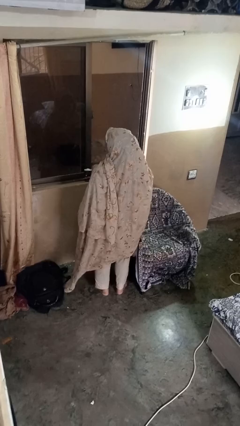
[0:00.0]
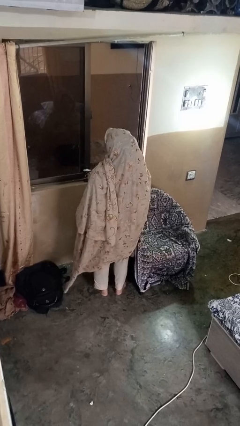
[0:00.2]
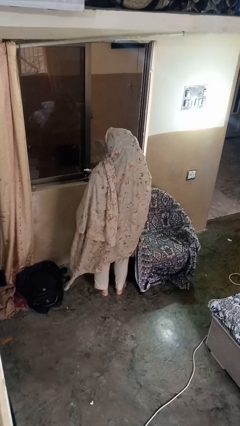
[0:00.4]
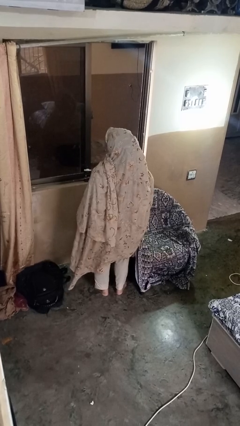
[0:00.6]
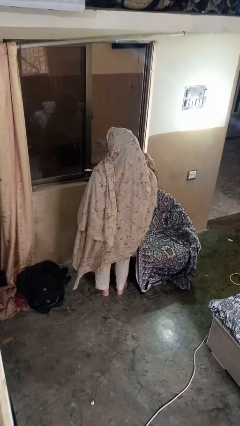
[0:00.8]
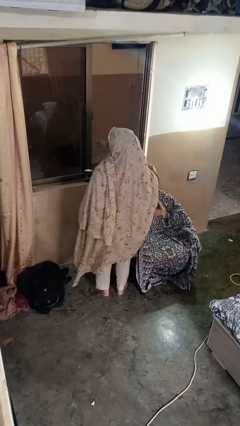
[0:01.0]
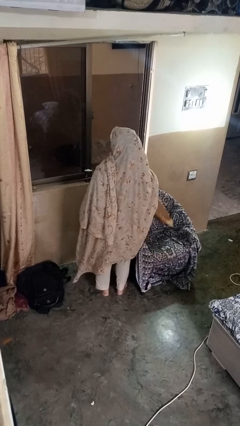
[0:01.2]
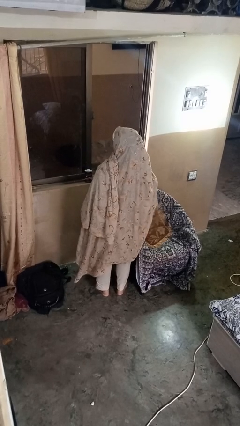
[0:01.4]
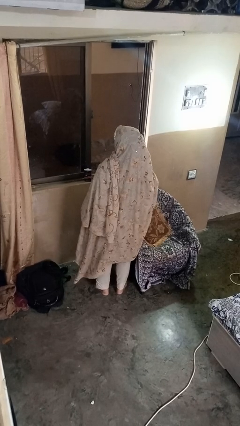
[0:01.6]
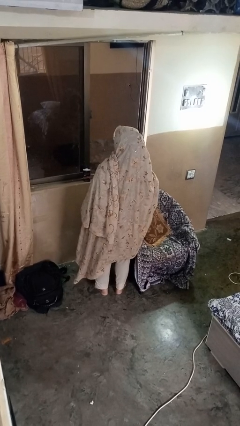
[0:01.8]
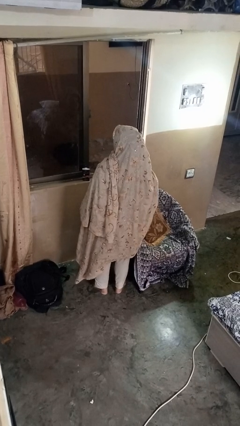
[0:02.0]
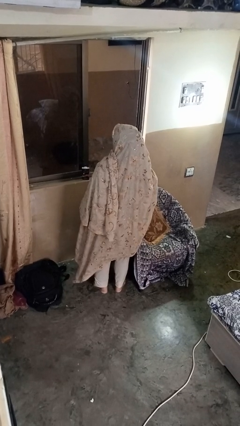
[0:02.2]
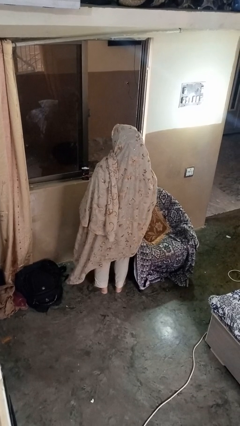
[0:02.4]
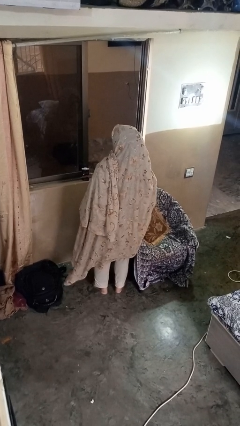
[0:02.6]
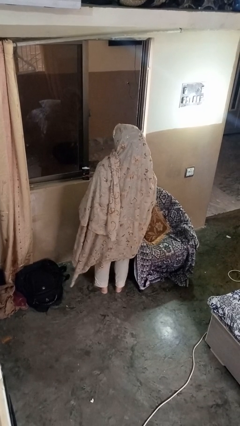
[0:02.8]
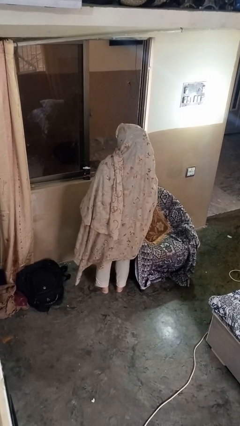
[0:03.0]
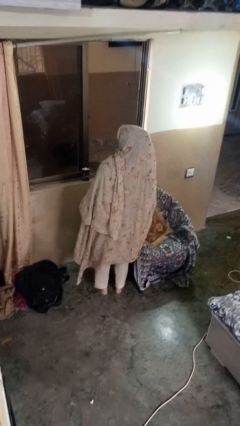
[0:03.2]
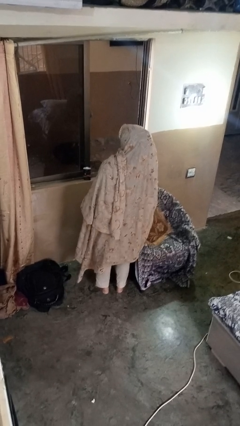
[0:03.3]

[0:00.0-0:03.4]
person puts down object on couch

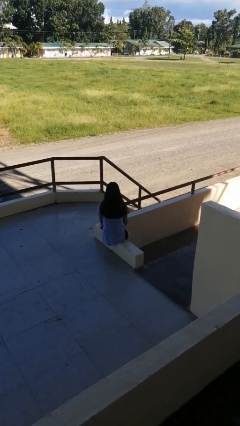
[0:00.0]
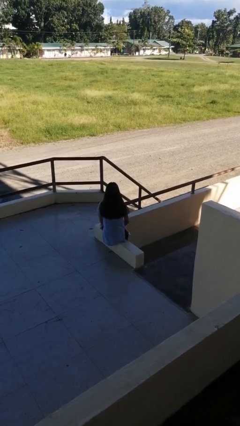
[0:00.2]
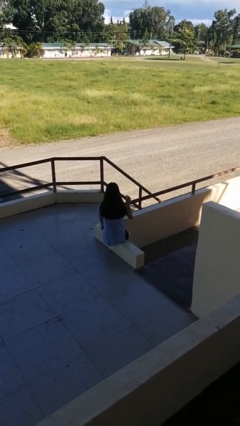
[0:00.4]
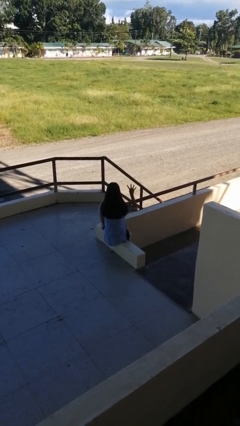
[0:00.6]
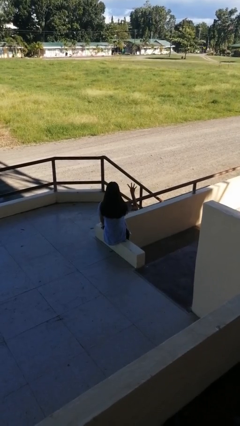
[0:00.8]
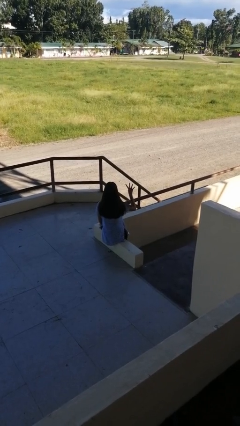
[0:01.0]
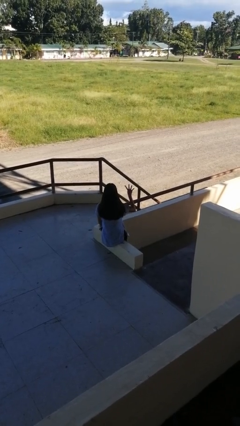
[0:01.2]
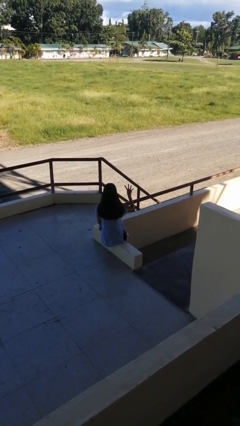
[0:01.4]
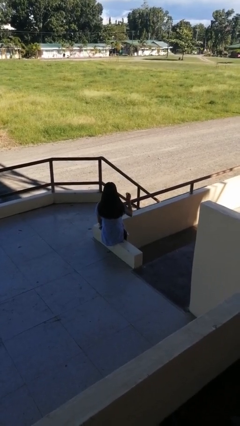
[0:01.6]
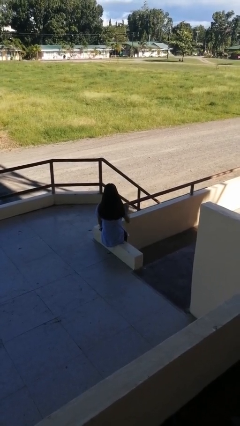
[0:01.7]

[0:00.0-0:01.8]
person gestures number four

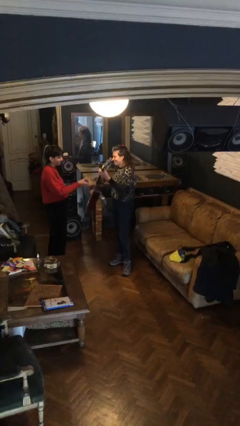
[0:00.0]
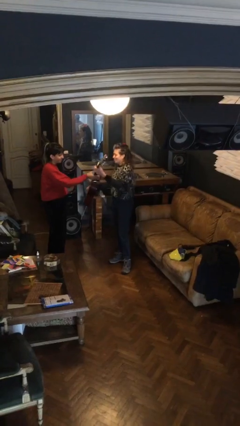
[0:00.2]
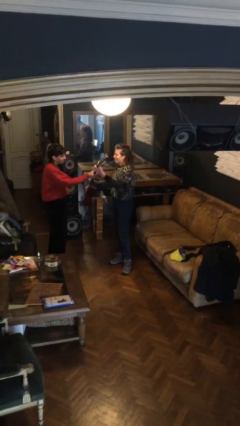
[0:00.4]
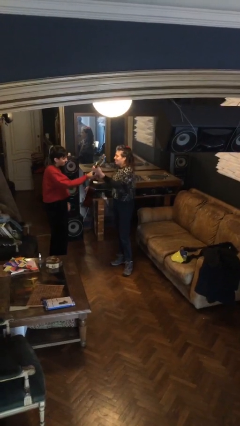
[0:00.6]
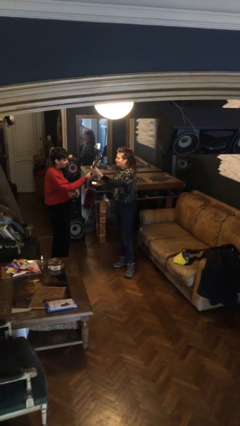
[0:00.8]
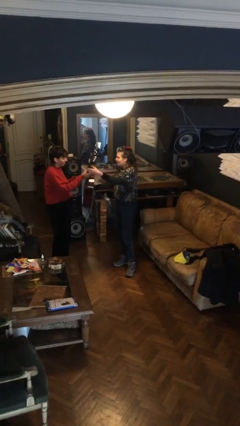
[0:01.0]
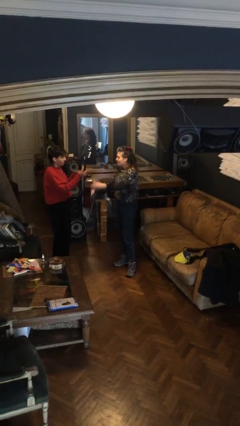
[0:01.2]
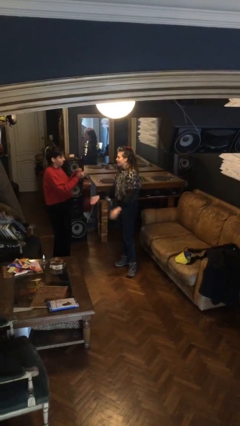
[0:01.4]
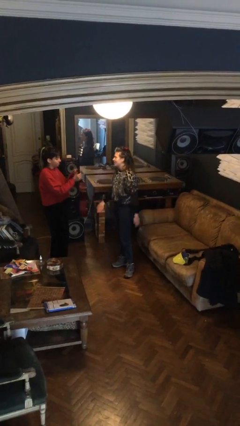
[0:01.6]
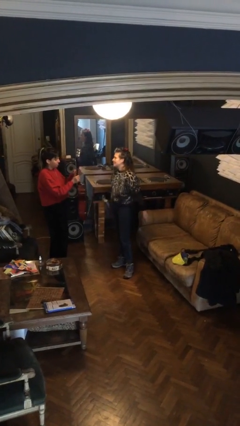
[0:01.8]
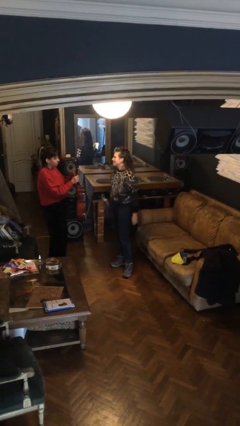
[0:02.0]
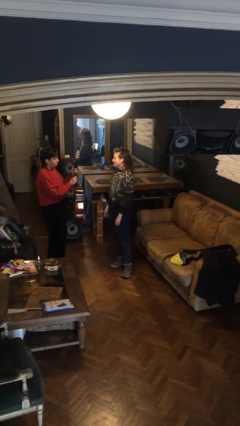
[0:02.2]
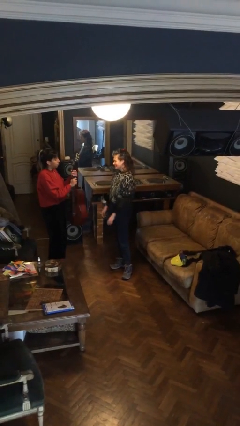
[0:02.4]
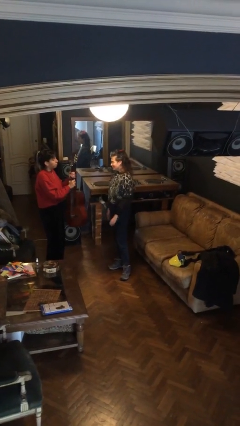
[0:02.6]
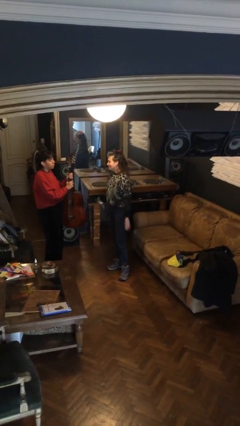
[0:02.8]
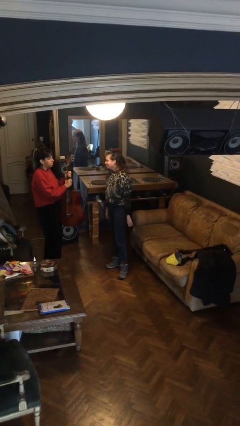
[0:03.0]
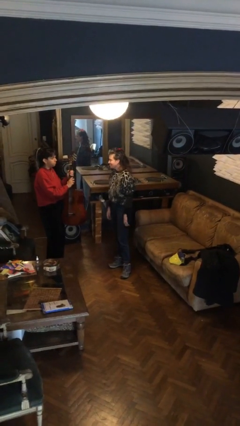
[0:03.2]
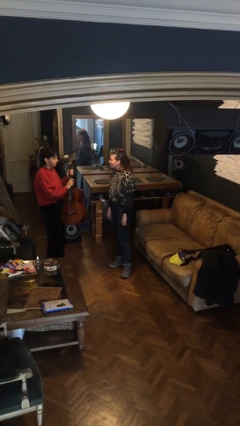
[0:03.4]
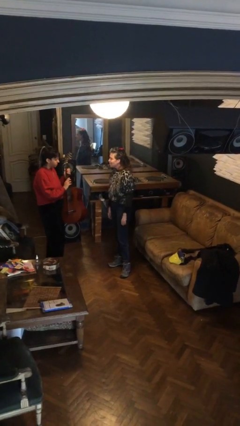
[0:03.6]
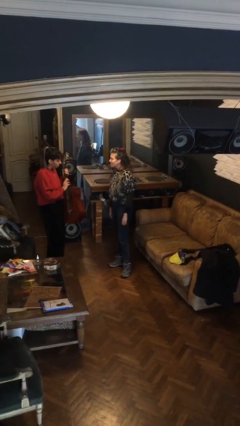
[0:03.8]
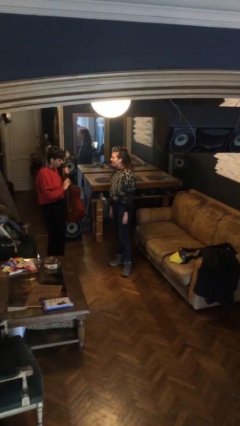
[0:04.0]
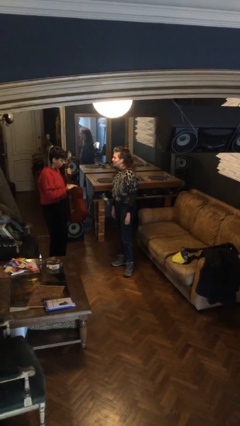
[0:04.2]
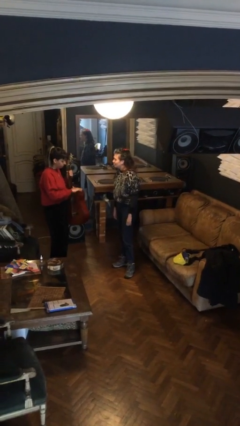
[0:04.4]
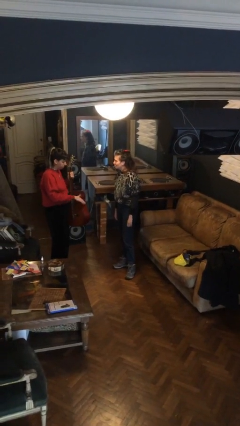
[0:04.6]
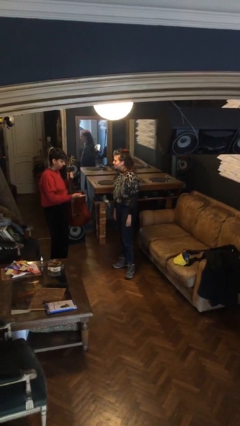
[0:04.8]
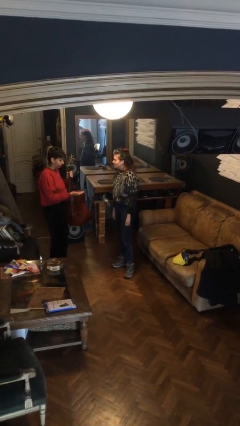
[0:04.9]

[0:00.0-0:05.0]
person transfers object to person

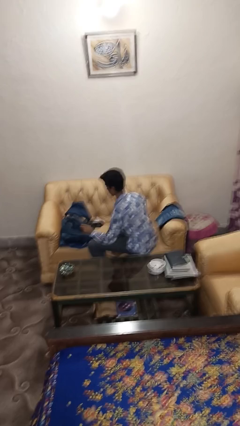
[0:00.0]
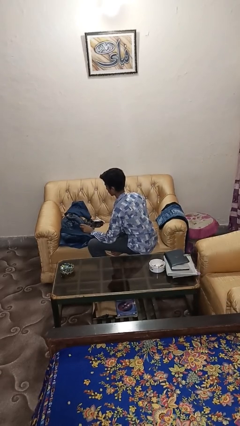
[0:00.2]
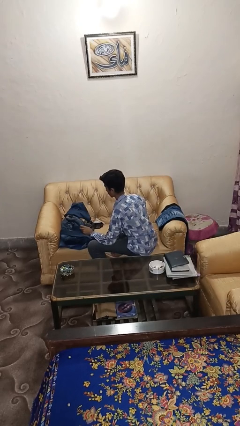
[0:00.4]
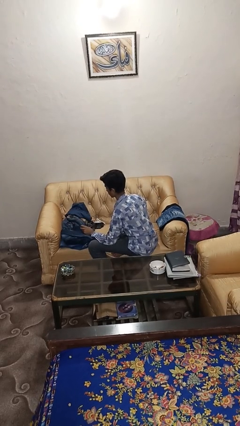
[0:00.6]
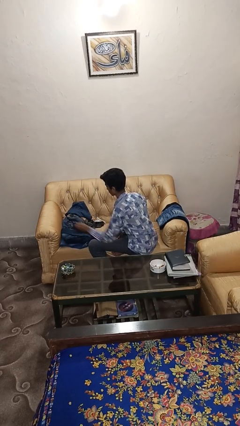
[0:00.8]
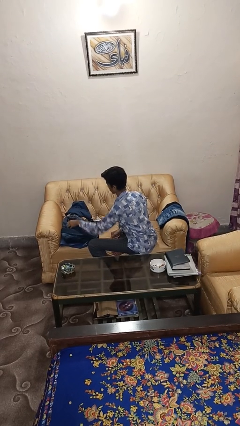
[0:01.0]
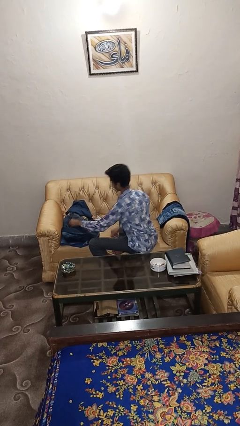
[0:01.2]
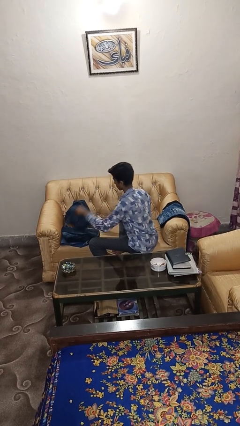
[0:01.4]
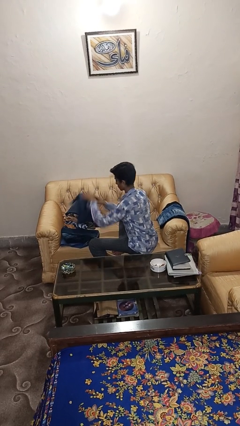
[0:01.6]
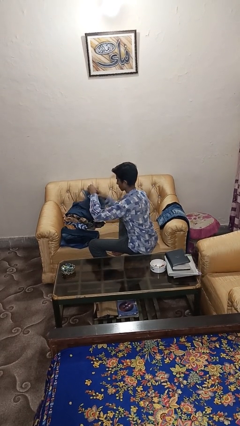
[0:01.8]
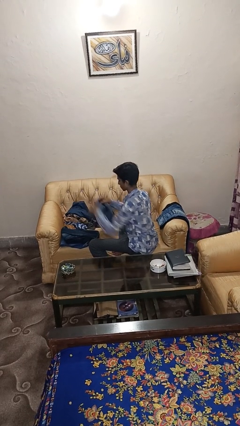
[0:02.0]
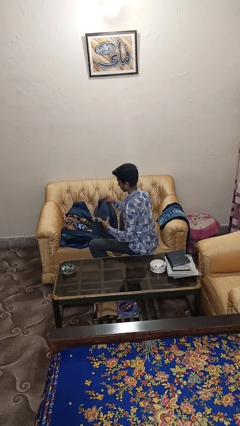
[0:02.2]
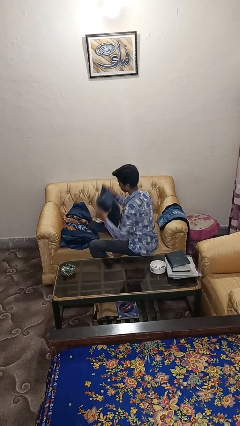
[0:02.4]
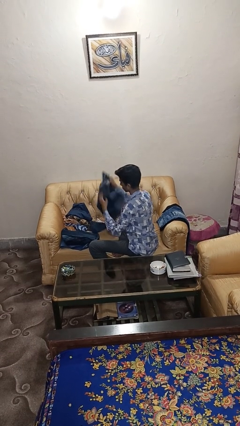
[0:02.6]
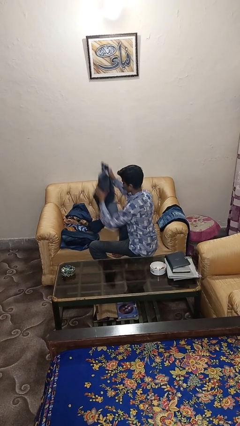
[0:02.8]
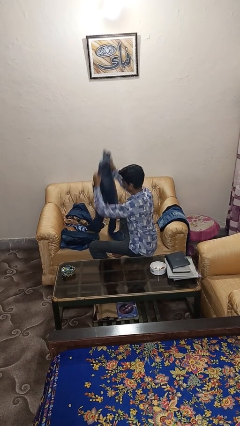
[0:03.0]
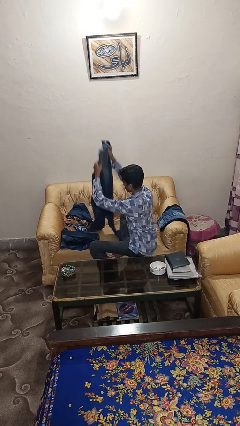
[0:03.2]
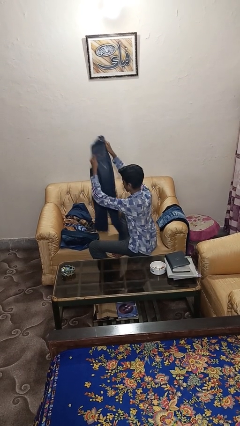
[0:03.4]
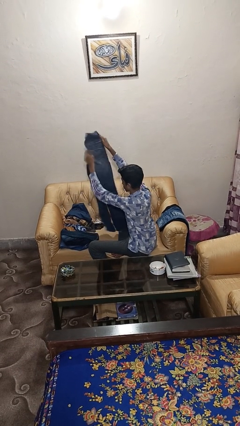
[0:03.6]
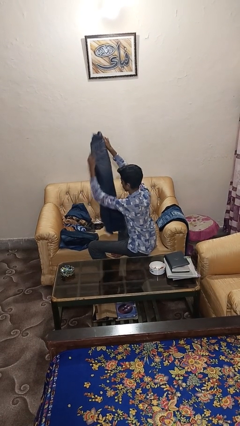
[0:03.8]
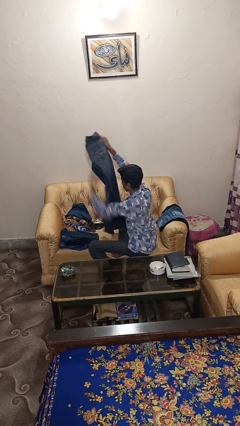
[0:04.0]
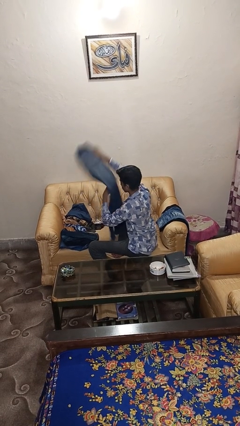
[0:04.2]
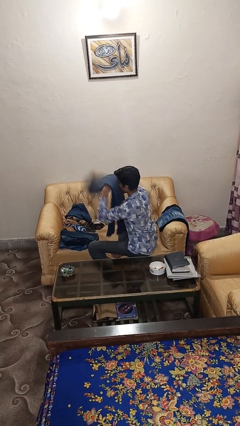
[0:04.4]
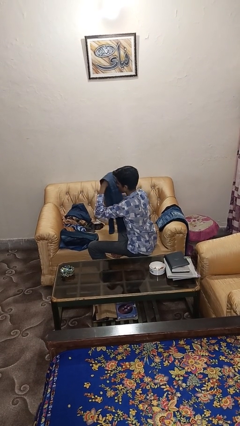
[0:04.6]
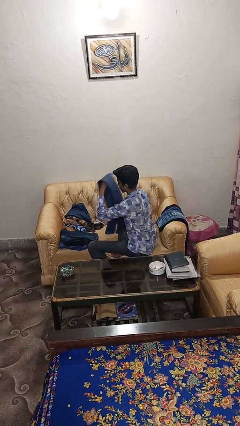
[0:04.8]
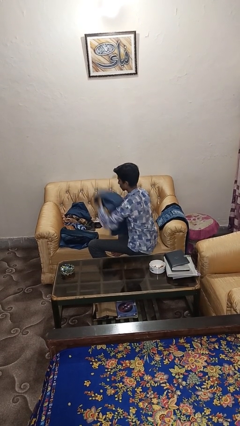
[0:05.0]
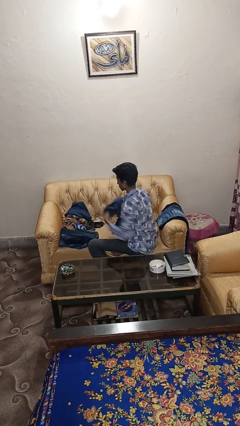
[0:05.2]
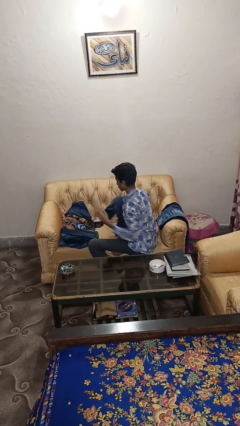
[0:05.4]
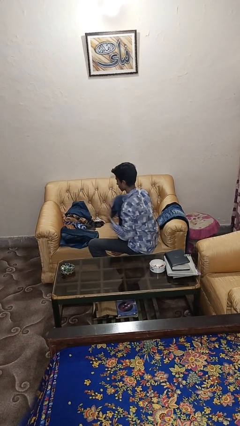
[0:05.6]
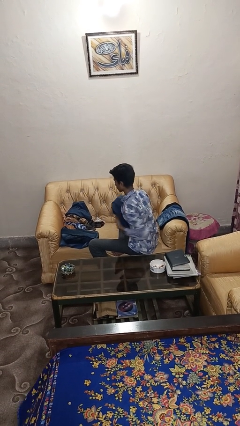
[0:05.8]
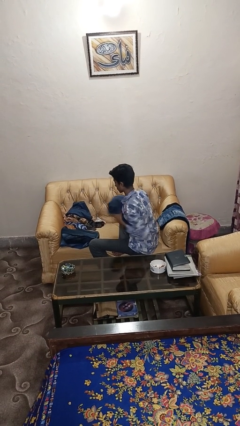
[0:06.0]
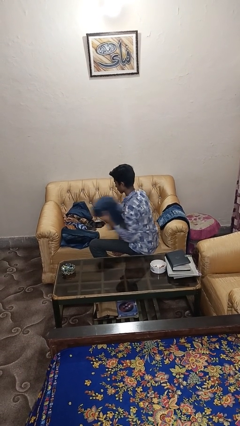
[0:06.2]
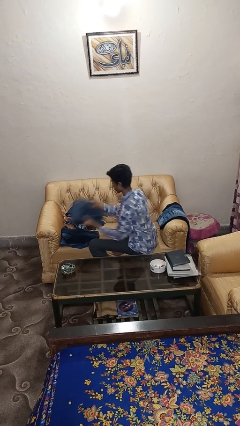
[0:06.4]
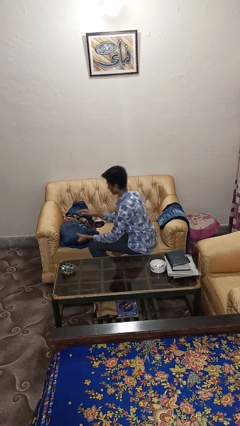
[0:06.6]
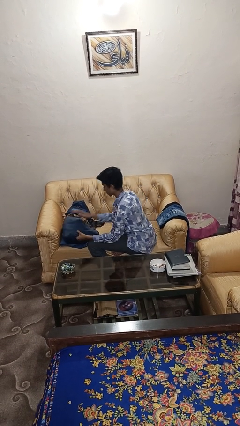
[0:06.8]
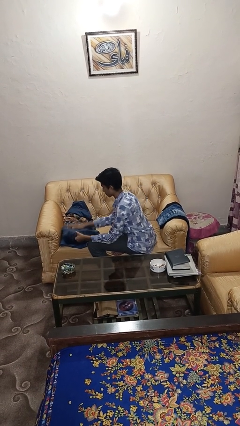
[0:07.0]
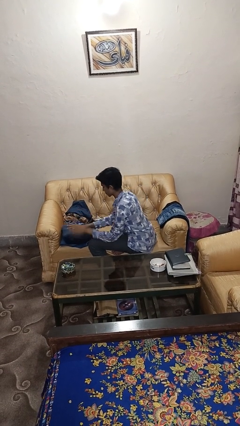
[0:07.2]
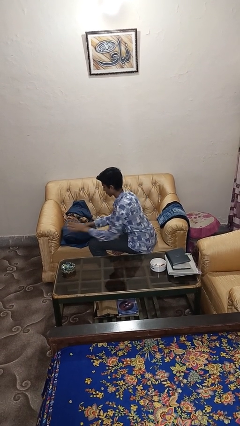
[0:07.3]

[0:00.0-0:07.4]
person folds pants

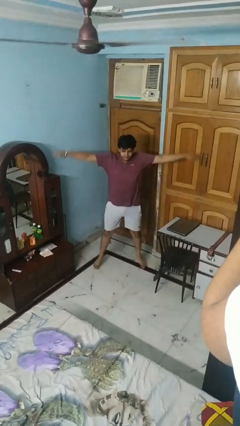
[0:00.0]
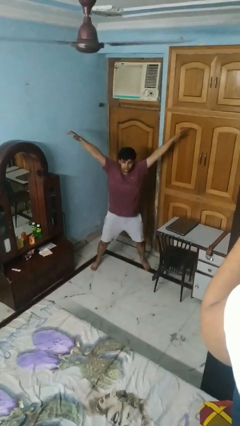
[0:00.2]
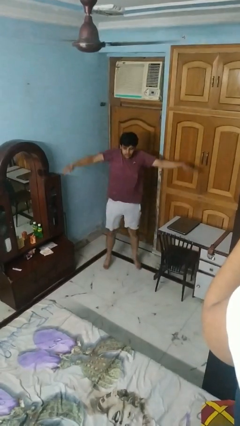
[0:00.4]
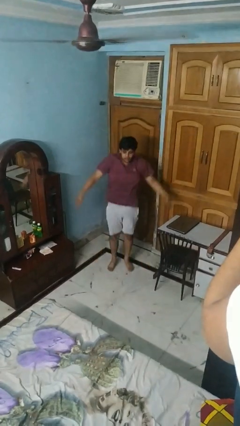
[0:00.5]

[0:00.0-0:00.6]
person exercises with jumping jacks
